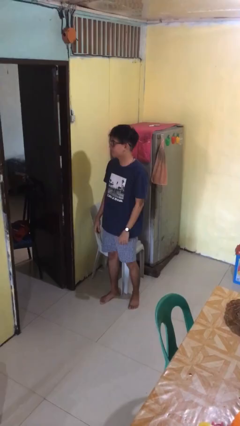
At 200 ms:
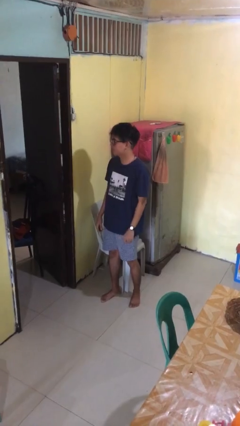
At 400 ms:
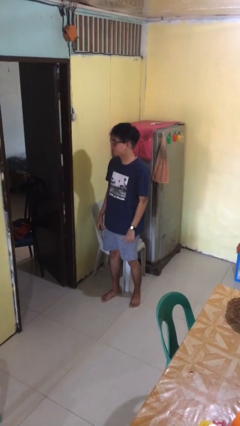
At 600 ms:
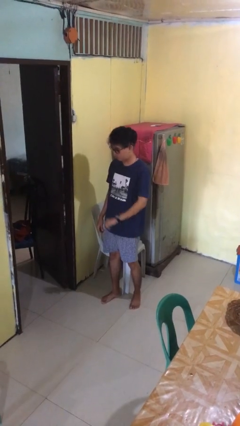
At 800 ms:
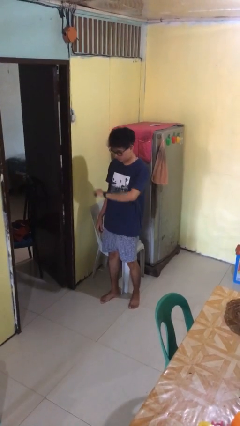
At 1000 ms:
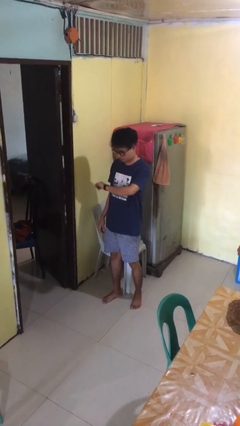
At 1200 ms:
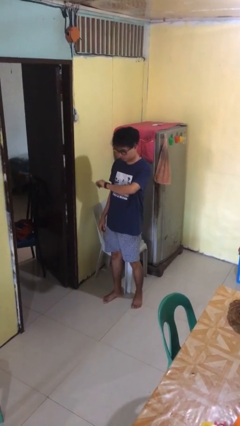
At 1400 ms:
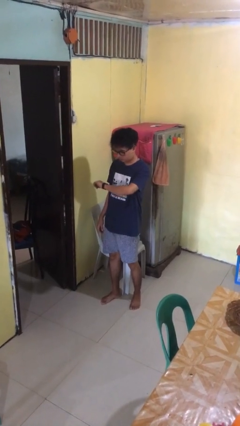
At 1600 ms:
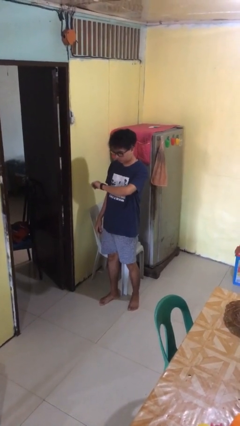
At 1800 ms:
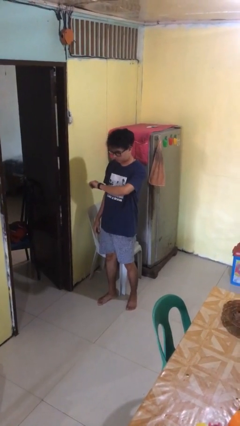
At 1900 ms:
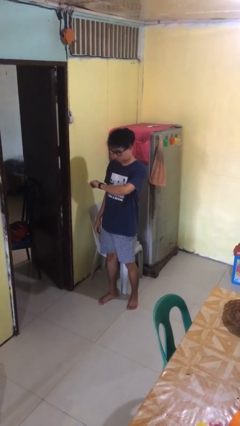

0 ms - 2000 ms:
person looks at wristwatch

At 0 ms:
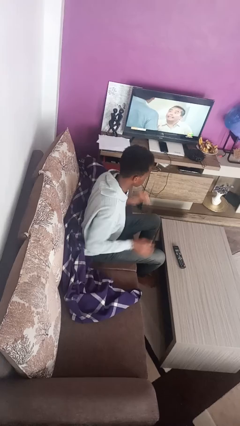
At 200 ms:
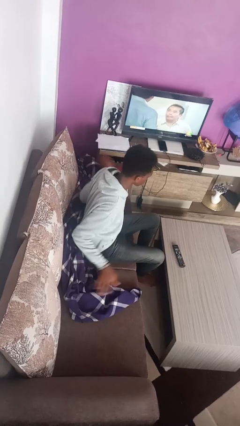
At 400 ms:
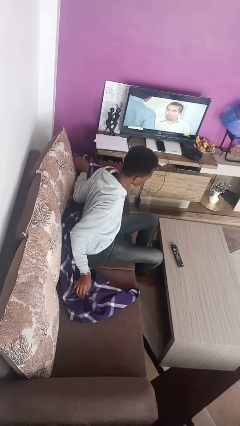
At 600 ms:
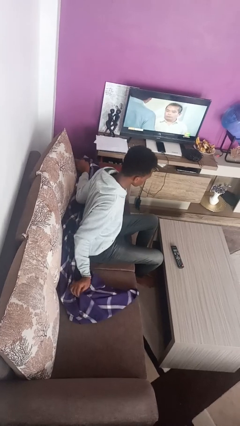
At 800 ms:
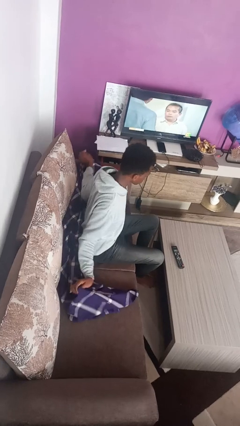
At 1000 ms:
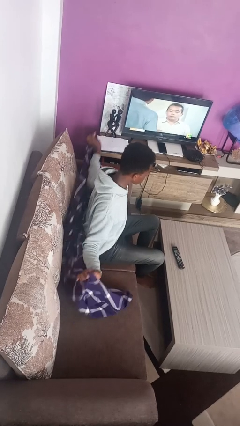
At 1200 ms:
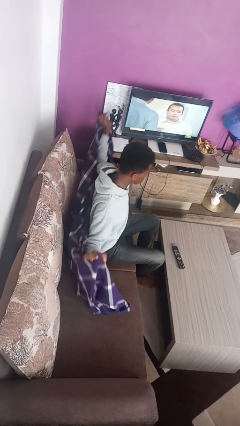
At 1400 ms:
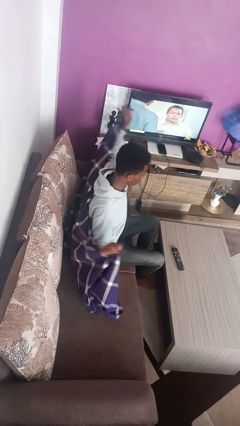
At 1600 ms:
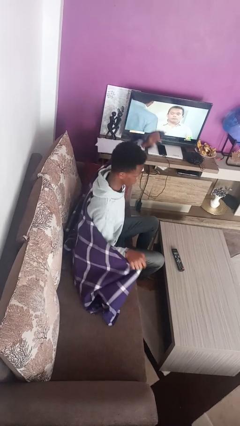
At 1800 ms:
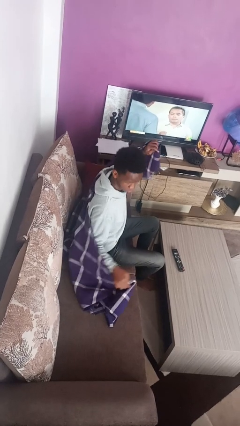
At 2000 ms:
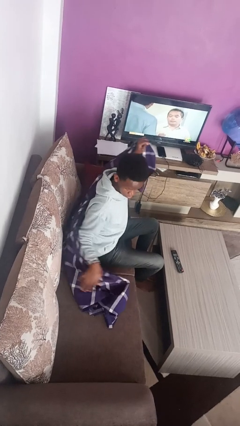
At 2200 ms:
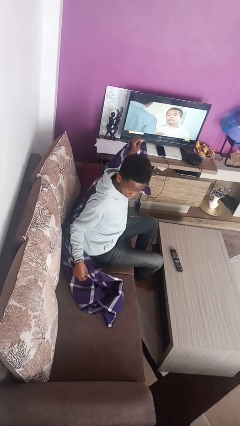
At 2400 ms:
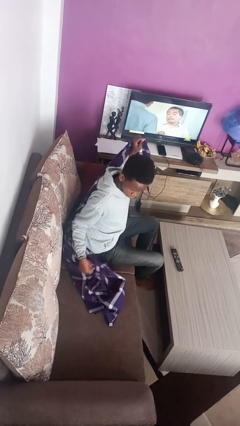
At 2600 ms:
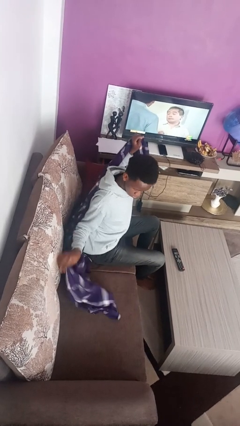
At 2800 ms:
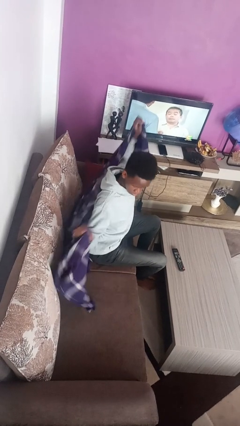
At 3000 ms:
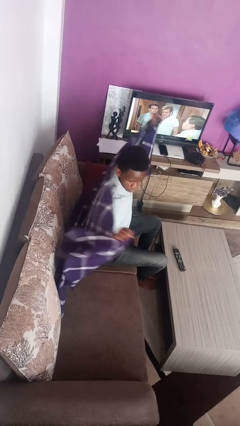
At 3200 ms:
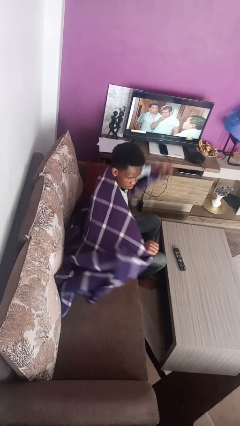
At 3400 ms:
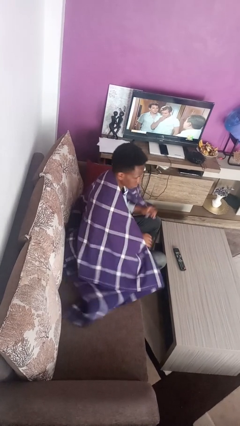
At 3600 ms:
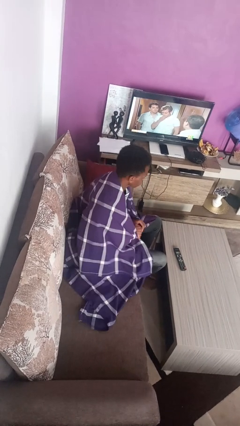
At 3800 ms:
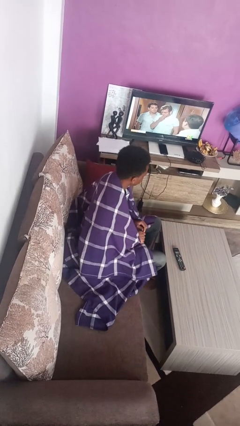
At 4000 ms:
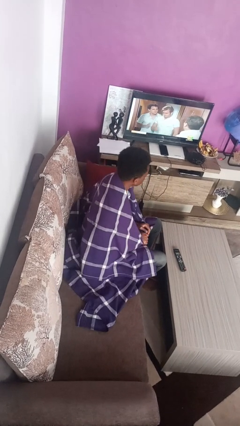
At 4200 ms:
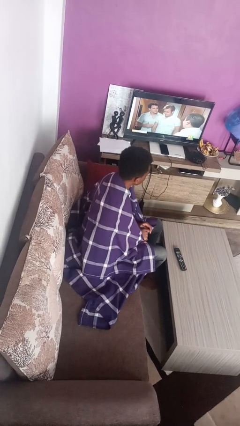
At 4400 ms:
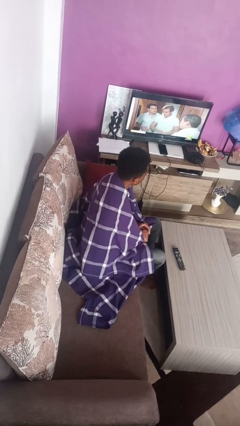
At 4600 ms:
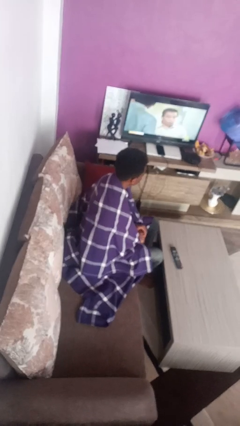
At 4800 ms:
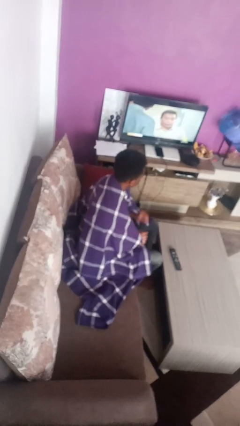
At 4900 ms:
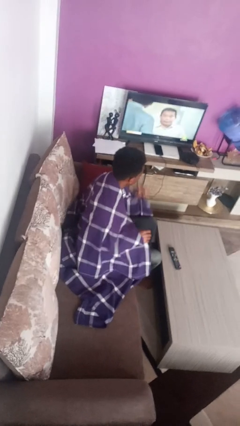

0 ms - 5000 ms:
person covers with blanket

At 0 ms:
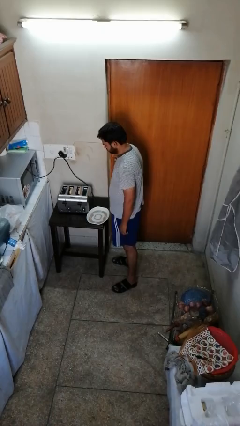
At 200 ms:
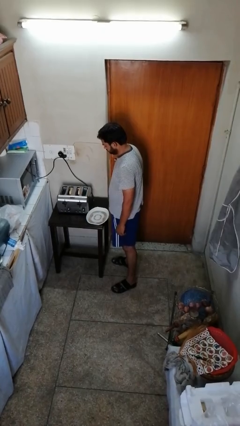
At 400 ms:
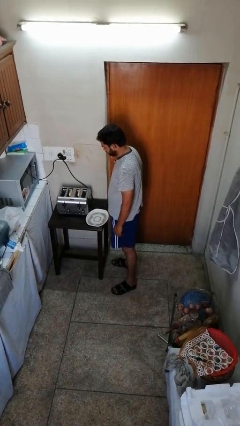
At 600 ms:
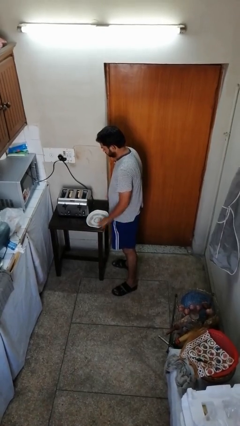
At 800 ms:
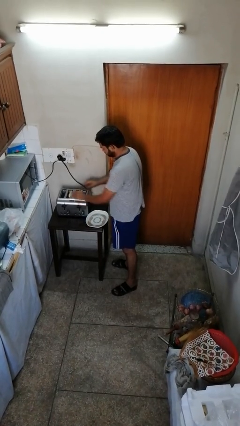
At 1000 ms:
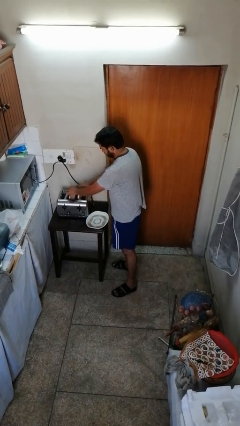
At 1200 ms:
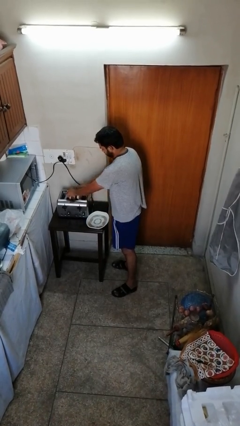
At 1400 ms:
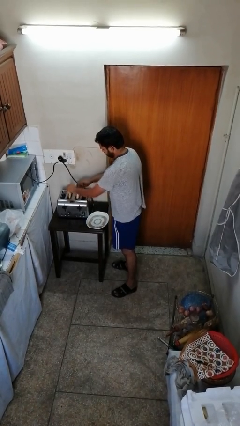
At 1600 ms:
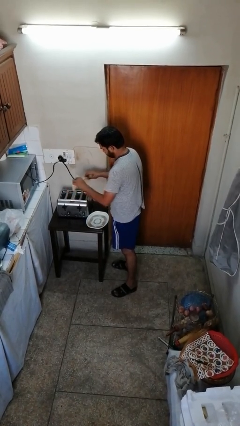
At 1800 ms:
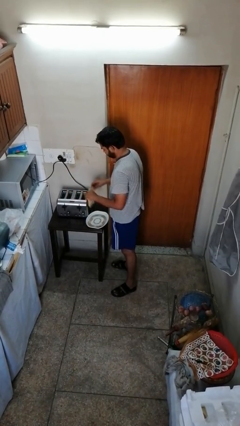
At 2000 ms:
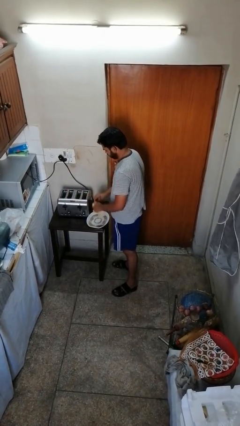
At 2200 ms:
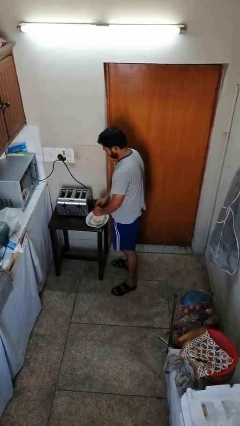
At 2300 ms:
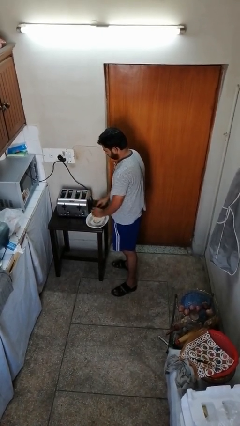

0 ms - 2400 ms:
person takes object from toaster

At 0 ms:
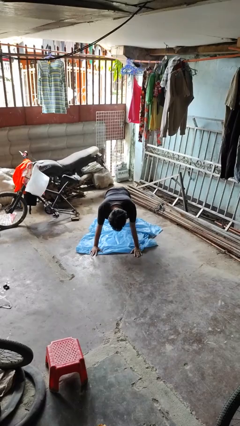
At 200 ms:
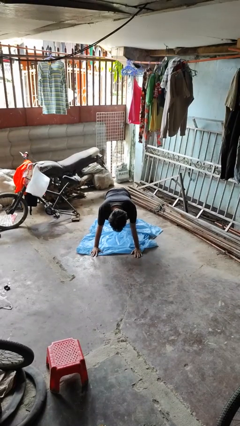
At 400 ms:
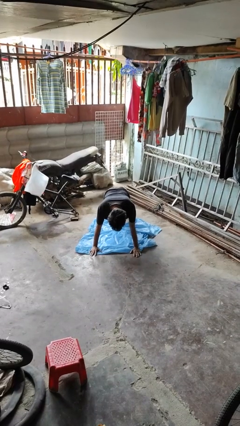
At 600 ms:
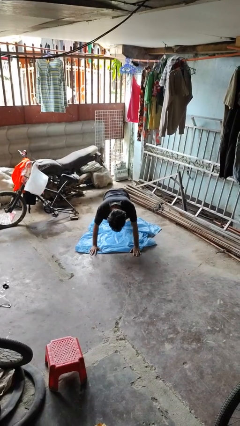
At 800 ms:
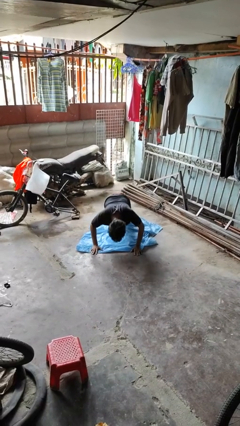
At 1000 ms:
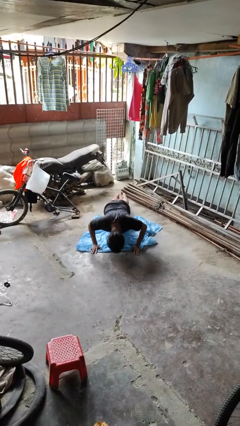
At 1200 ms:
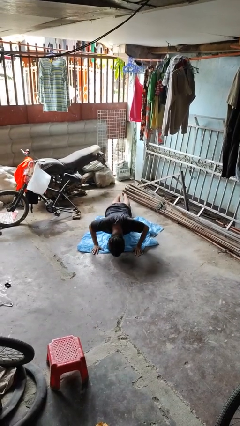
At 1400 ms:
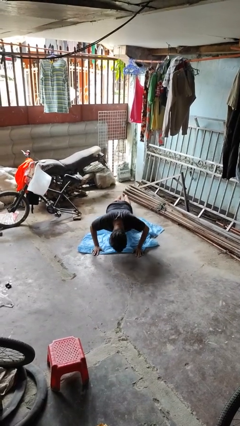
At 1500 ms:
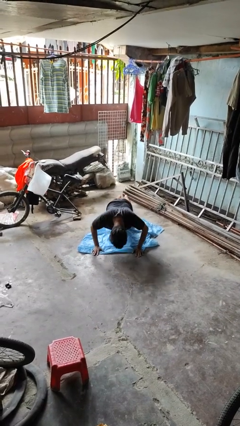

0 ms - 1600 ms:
person exercises with pushup

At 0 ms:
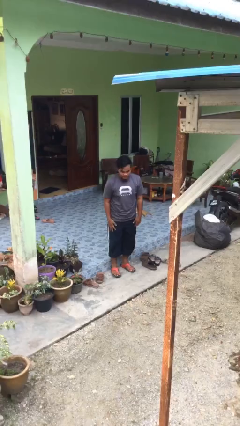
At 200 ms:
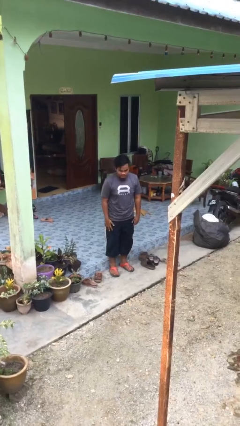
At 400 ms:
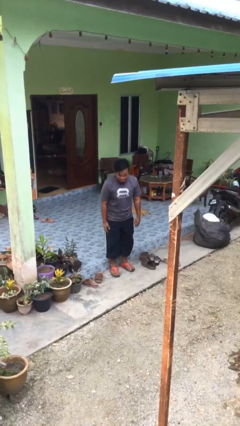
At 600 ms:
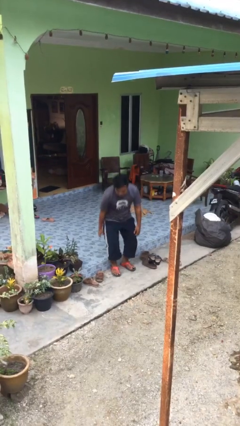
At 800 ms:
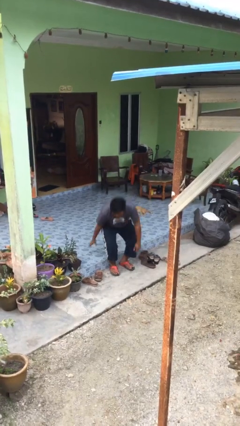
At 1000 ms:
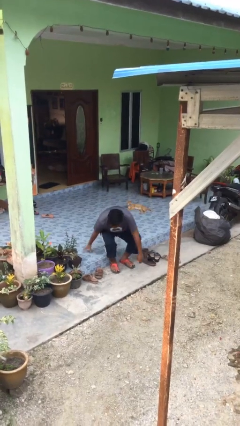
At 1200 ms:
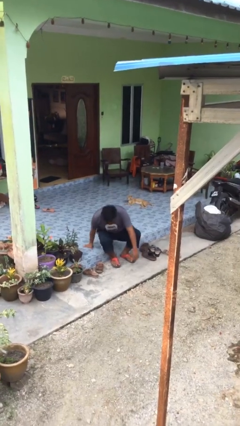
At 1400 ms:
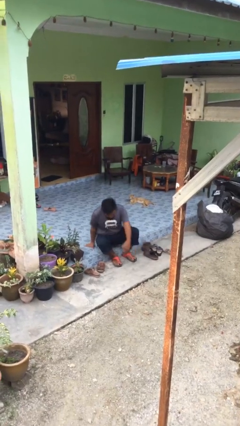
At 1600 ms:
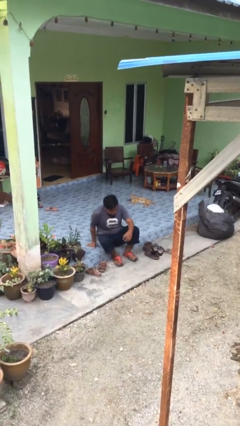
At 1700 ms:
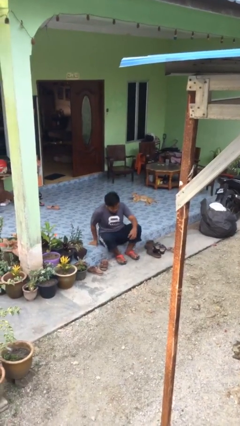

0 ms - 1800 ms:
person sits down

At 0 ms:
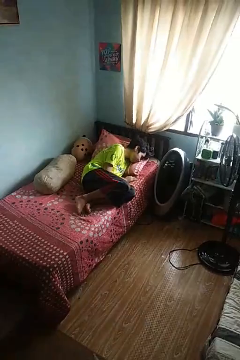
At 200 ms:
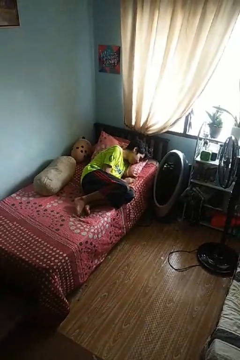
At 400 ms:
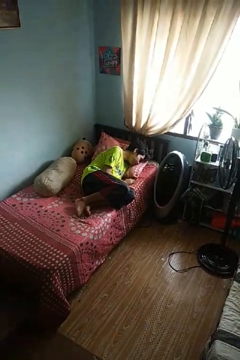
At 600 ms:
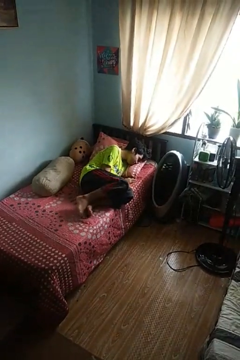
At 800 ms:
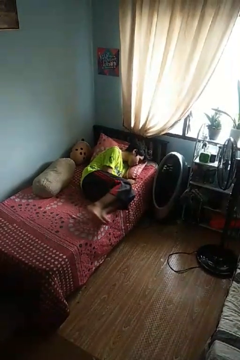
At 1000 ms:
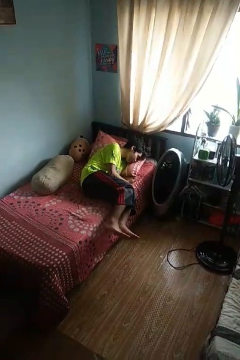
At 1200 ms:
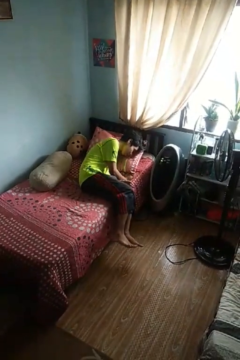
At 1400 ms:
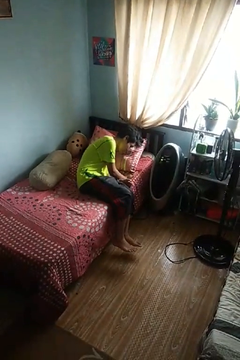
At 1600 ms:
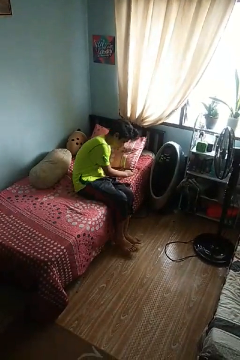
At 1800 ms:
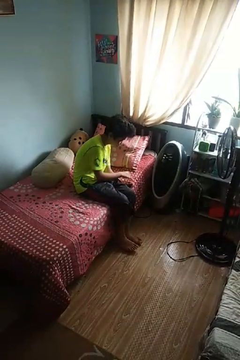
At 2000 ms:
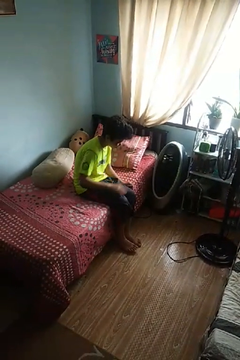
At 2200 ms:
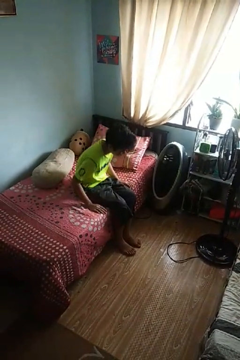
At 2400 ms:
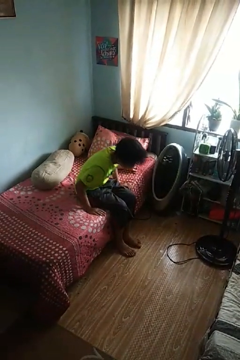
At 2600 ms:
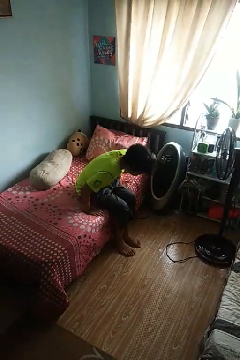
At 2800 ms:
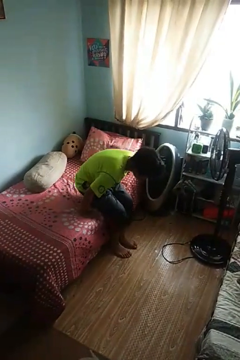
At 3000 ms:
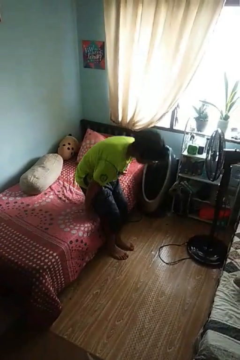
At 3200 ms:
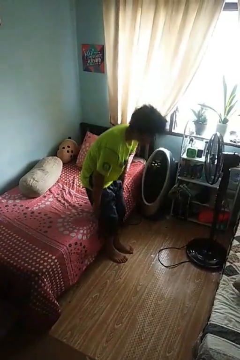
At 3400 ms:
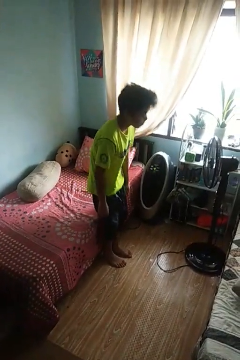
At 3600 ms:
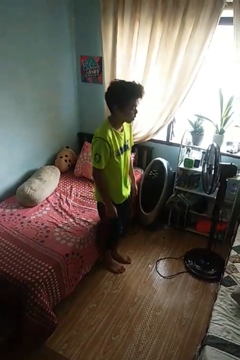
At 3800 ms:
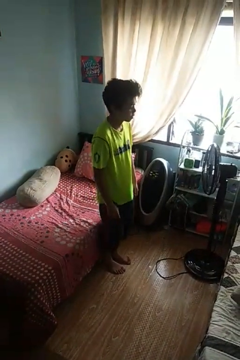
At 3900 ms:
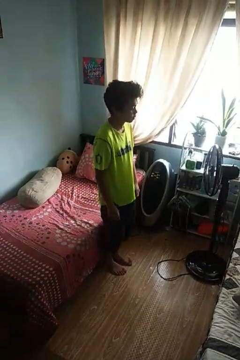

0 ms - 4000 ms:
person stands up

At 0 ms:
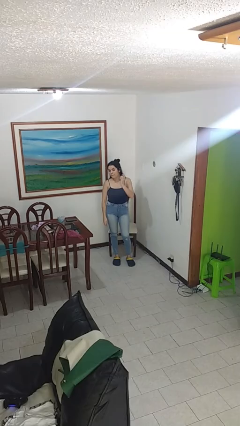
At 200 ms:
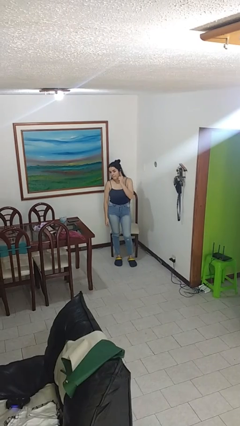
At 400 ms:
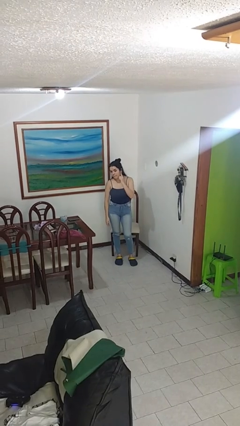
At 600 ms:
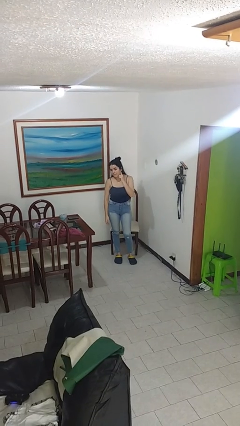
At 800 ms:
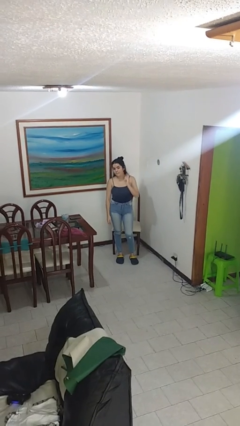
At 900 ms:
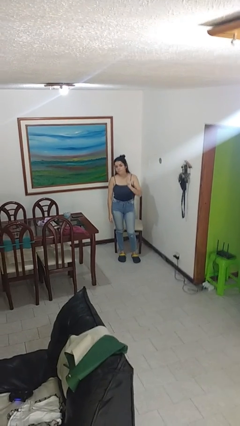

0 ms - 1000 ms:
person gestures listen closely

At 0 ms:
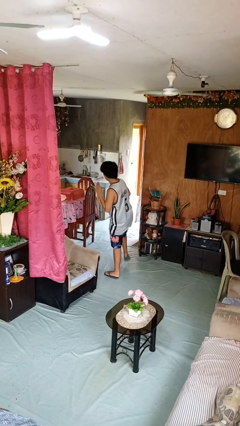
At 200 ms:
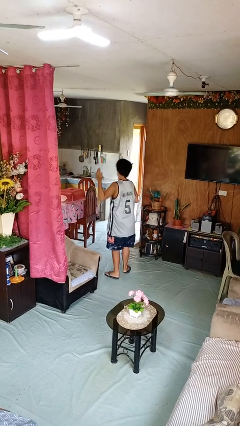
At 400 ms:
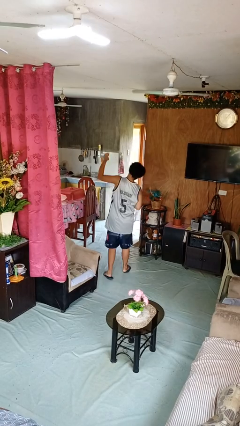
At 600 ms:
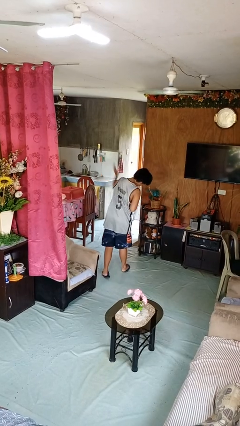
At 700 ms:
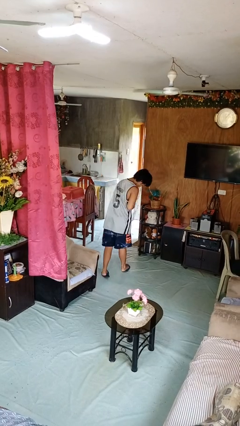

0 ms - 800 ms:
person karate chop
